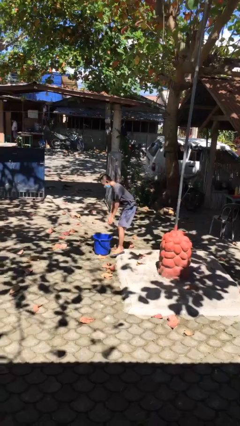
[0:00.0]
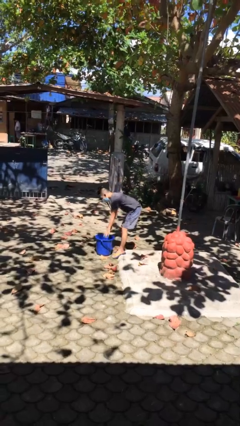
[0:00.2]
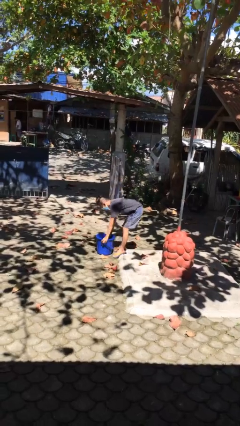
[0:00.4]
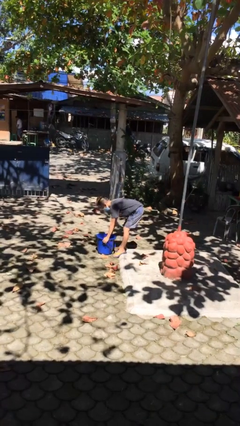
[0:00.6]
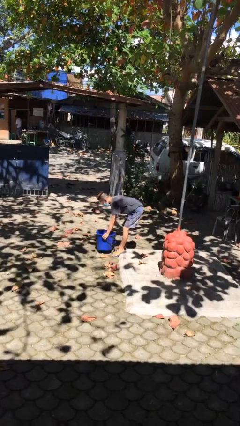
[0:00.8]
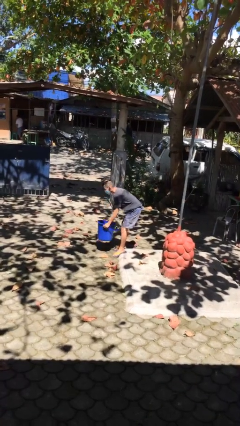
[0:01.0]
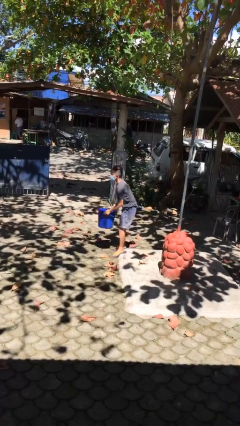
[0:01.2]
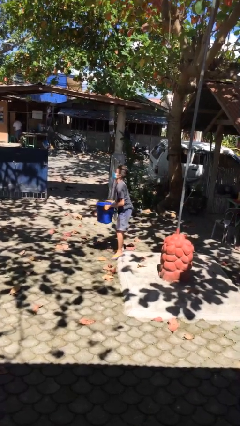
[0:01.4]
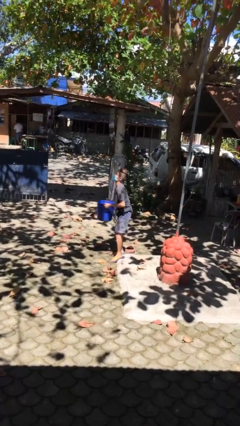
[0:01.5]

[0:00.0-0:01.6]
person picks up object from floor

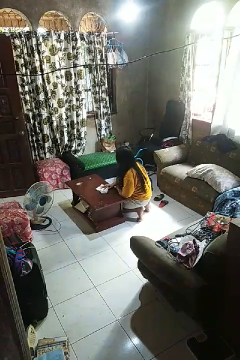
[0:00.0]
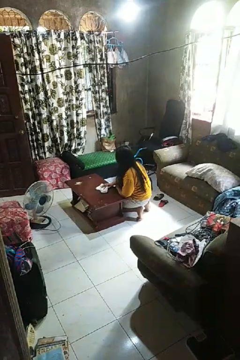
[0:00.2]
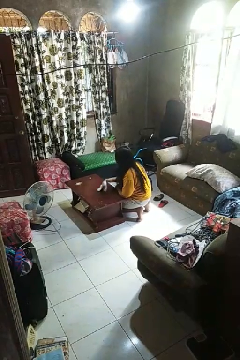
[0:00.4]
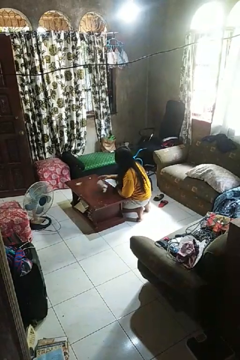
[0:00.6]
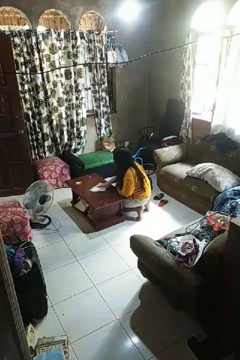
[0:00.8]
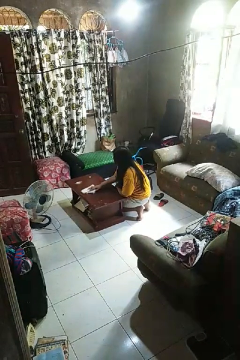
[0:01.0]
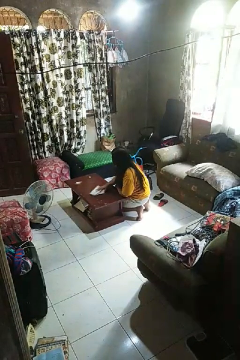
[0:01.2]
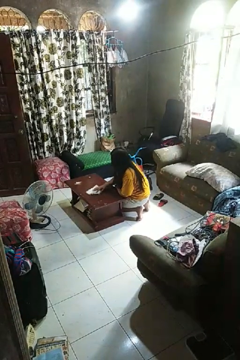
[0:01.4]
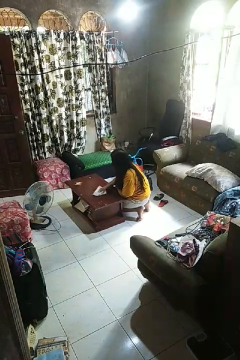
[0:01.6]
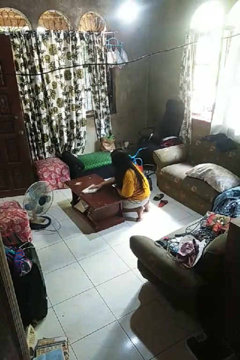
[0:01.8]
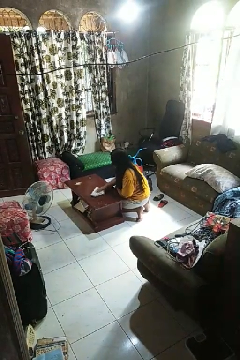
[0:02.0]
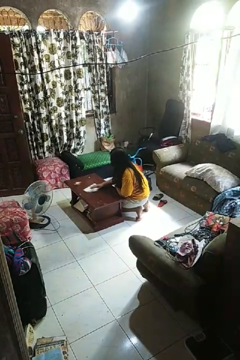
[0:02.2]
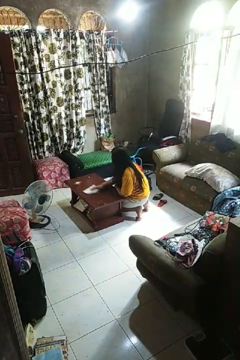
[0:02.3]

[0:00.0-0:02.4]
person cleans table with rag

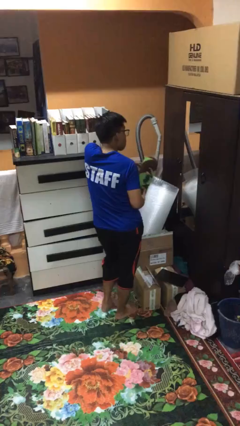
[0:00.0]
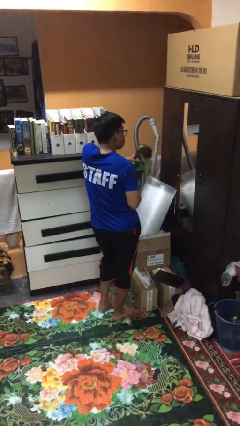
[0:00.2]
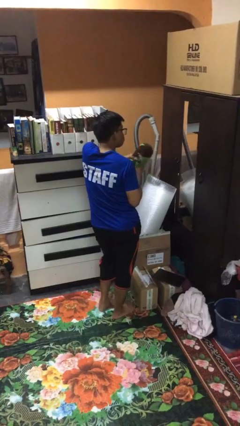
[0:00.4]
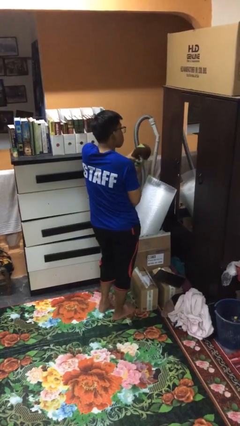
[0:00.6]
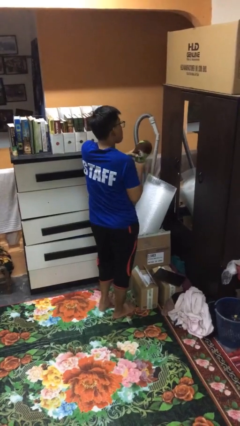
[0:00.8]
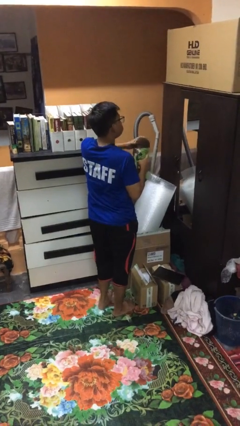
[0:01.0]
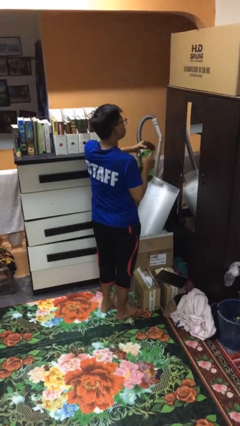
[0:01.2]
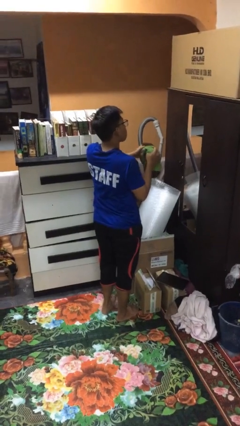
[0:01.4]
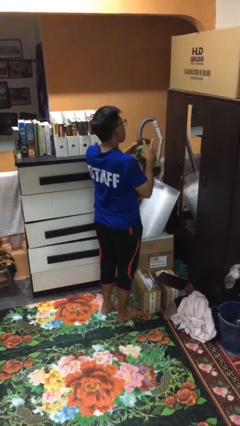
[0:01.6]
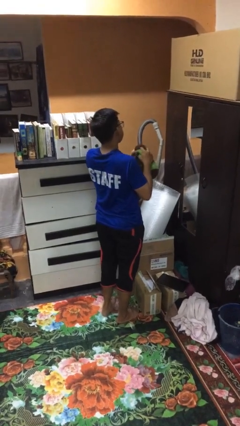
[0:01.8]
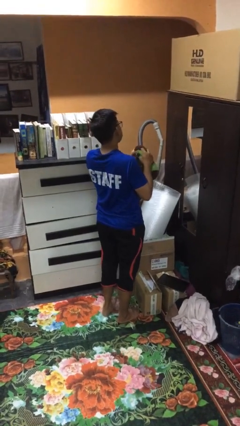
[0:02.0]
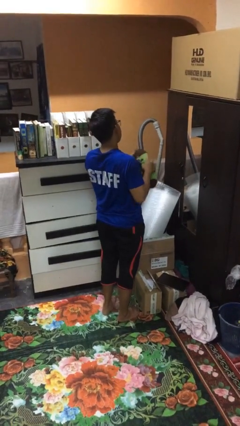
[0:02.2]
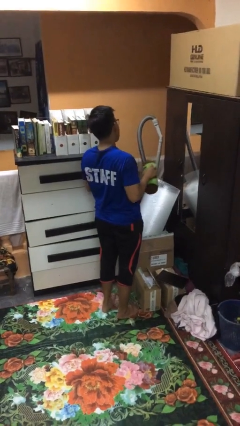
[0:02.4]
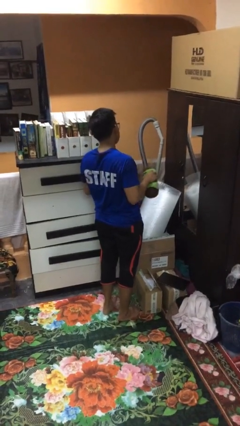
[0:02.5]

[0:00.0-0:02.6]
person squeezes object

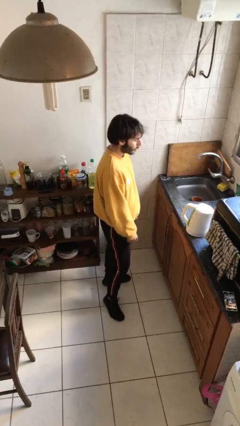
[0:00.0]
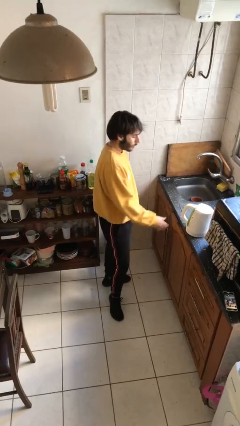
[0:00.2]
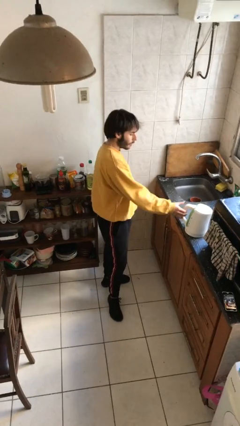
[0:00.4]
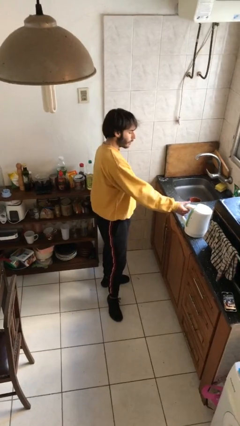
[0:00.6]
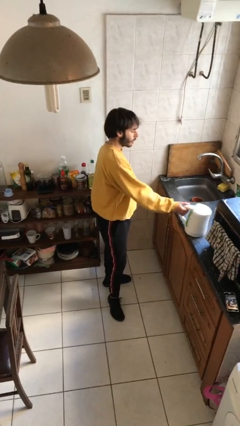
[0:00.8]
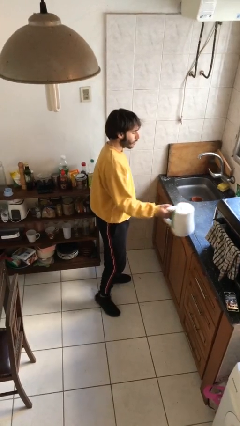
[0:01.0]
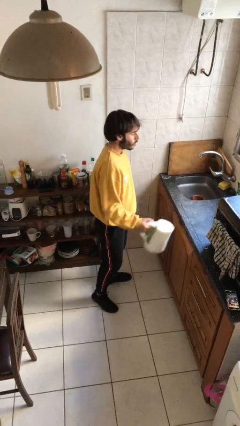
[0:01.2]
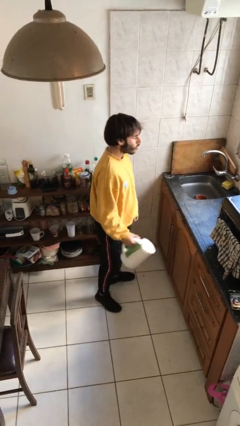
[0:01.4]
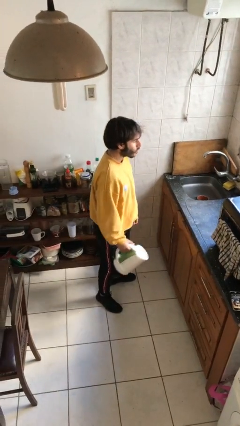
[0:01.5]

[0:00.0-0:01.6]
person picks up object from countertop

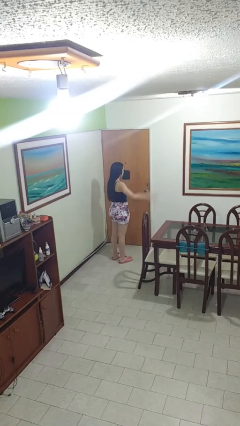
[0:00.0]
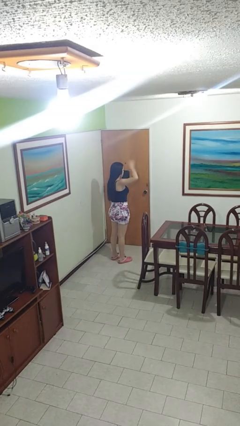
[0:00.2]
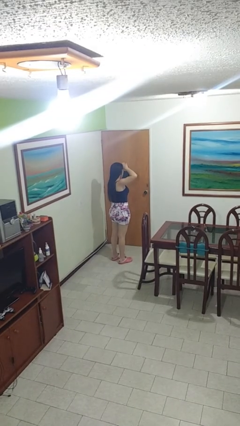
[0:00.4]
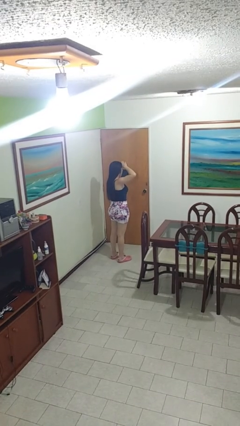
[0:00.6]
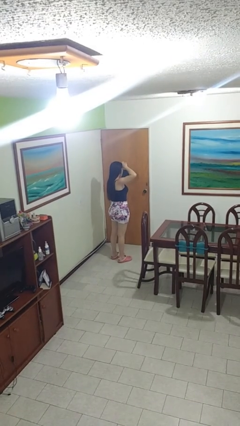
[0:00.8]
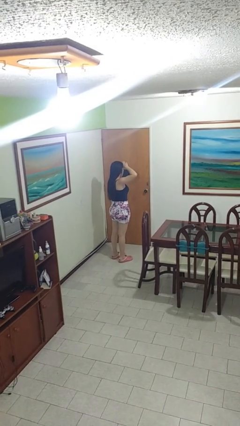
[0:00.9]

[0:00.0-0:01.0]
person salutes

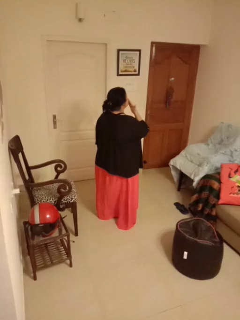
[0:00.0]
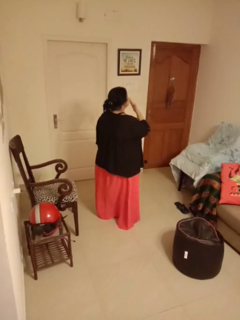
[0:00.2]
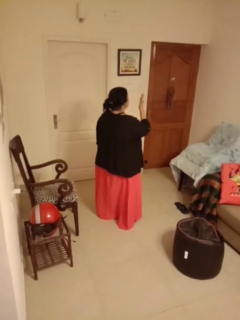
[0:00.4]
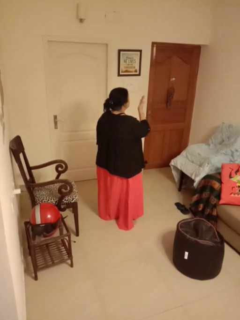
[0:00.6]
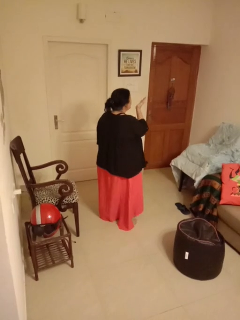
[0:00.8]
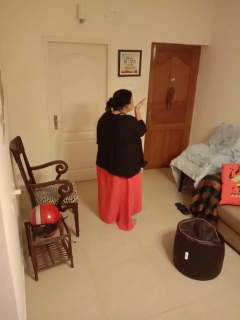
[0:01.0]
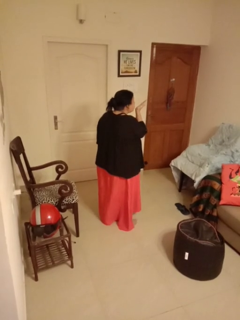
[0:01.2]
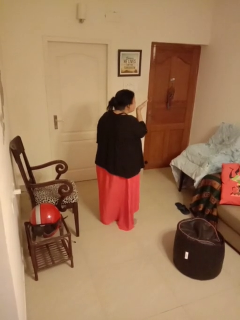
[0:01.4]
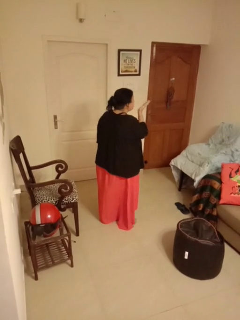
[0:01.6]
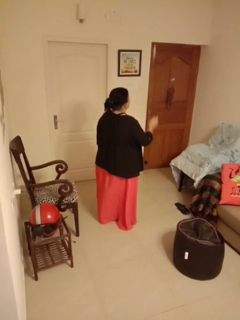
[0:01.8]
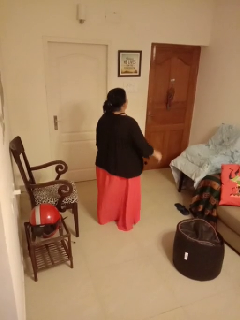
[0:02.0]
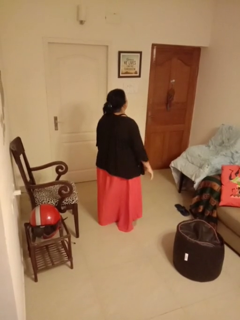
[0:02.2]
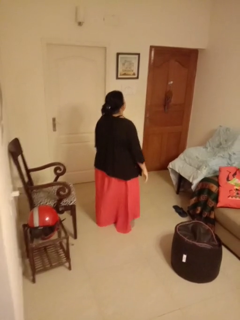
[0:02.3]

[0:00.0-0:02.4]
person gestures blow kiss

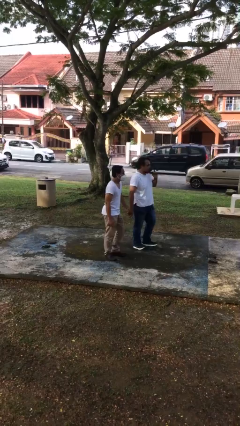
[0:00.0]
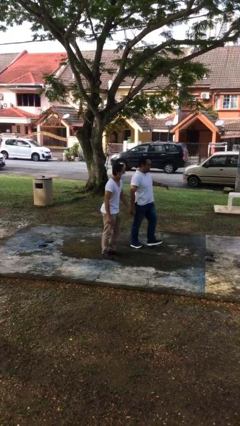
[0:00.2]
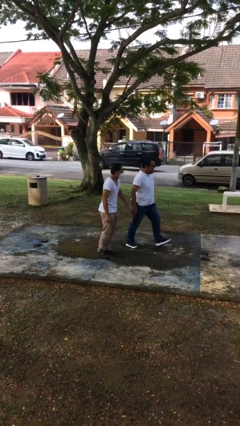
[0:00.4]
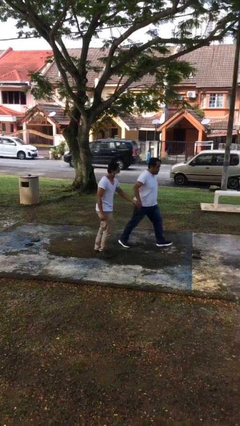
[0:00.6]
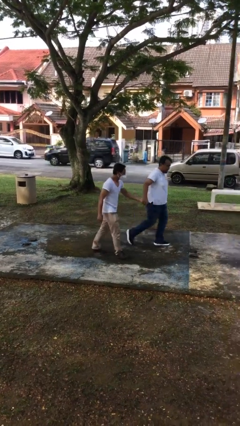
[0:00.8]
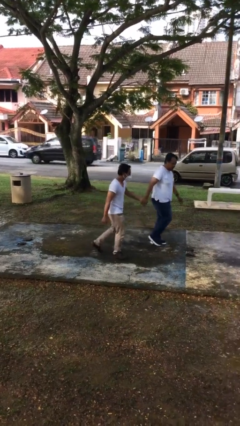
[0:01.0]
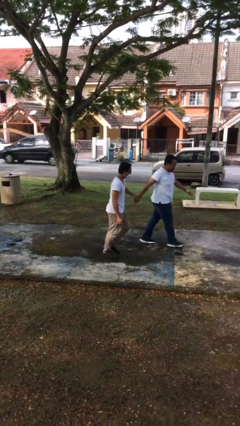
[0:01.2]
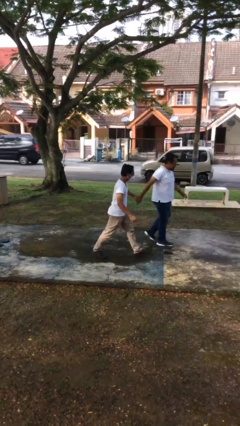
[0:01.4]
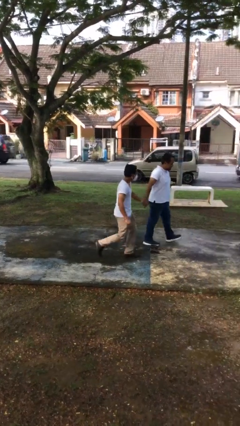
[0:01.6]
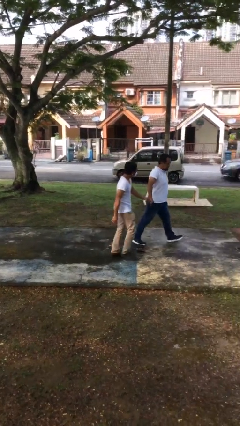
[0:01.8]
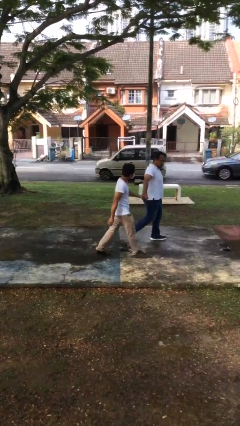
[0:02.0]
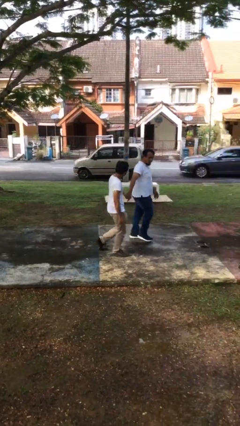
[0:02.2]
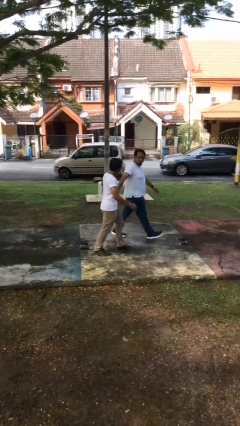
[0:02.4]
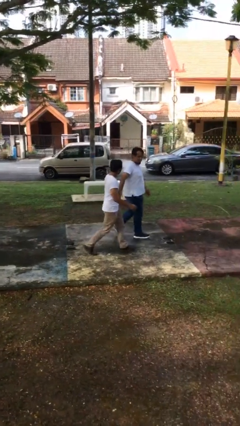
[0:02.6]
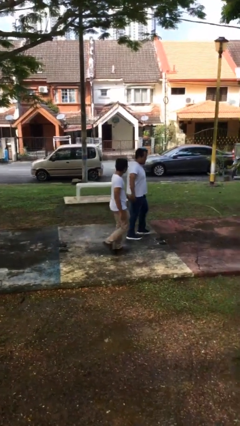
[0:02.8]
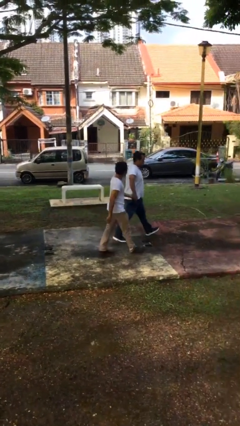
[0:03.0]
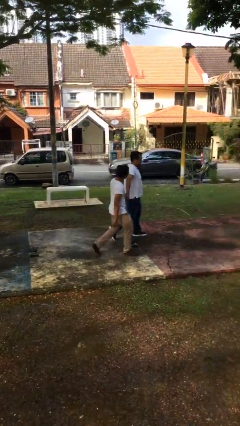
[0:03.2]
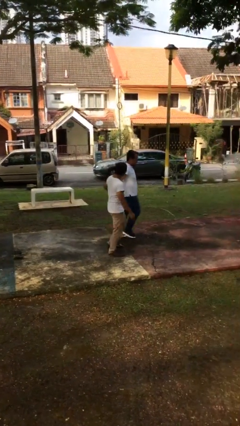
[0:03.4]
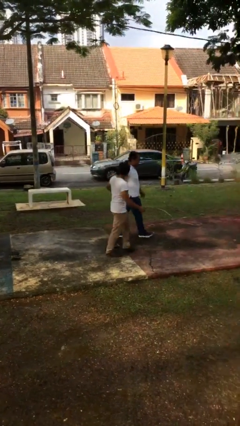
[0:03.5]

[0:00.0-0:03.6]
person holds hand

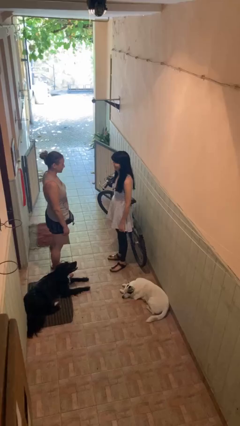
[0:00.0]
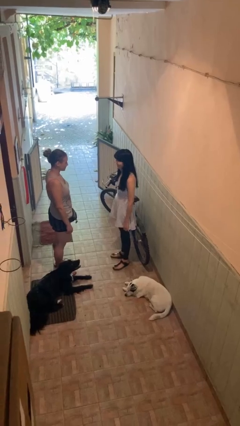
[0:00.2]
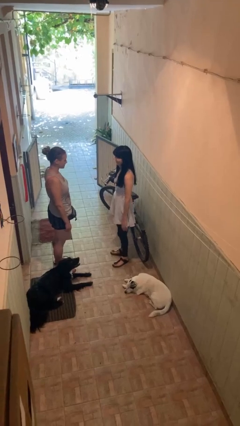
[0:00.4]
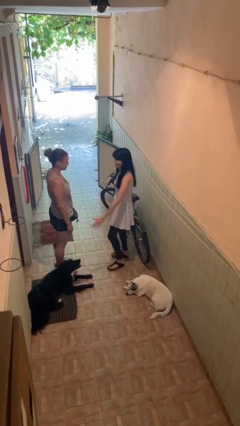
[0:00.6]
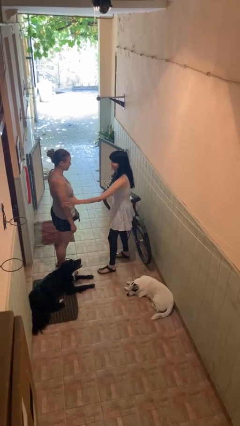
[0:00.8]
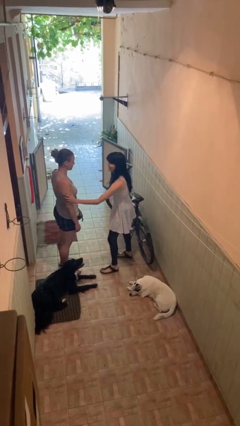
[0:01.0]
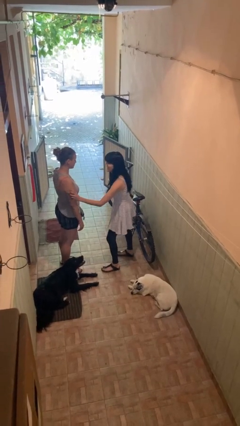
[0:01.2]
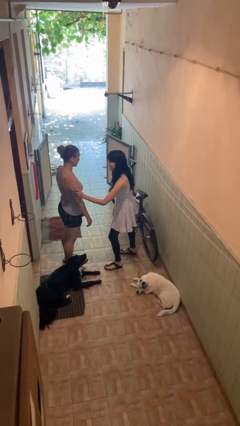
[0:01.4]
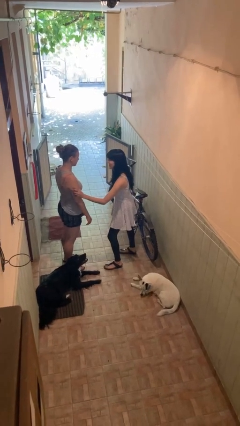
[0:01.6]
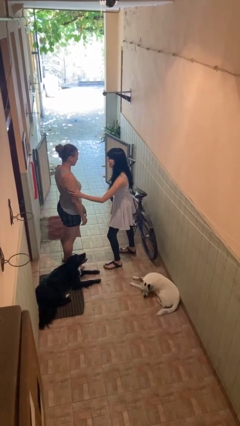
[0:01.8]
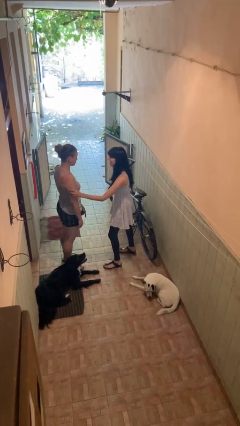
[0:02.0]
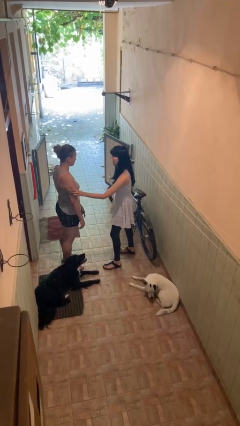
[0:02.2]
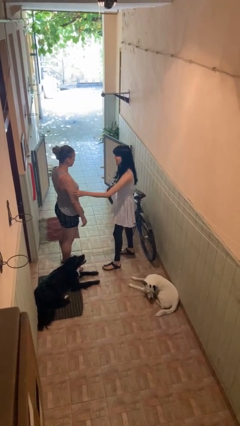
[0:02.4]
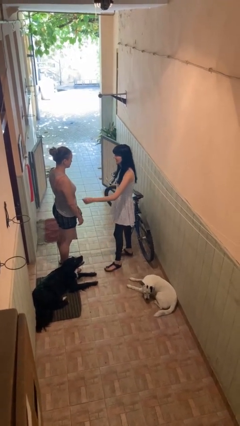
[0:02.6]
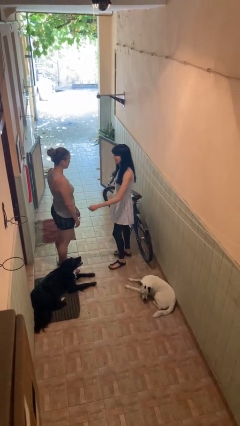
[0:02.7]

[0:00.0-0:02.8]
person grabs person by bicep
